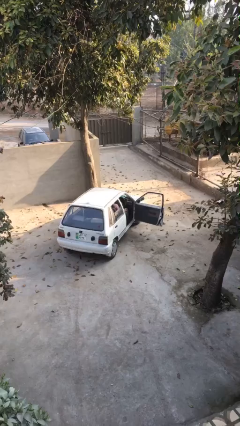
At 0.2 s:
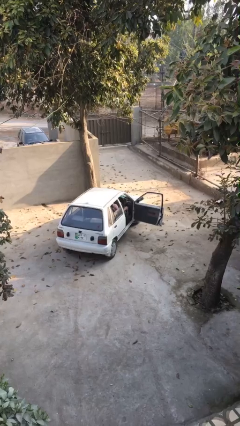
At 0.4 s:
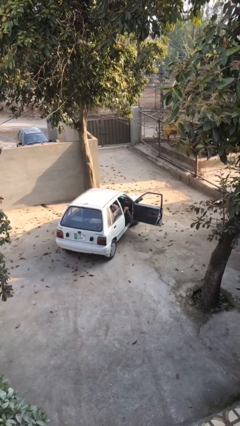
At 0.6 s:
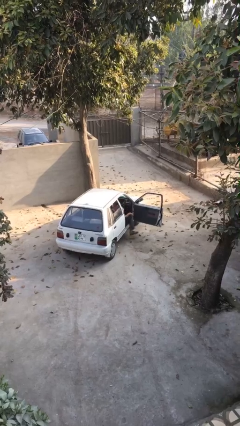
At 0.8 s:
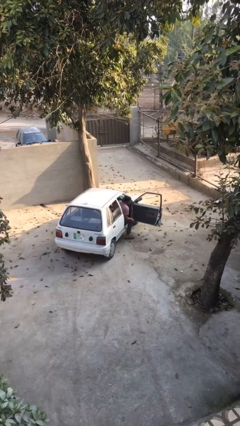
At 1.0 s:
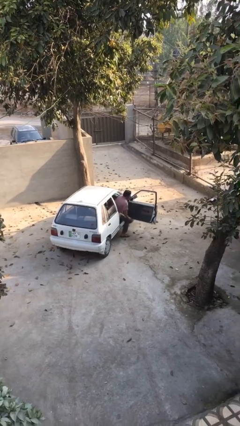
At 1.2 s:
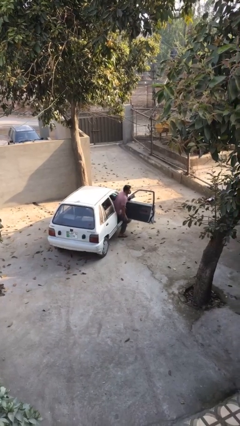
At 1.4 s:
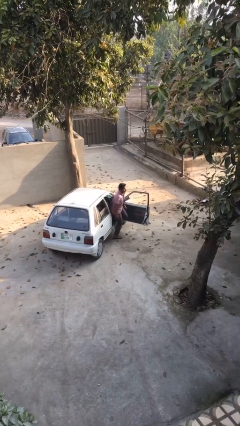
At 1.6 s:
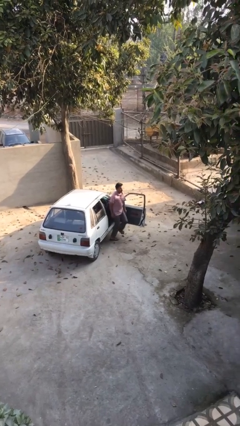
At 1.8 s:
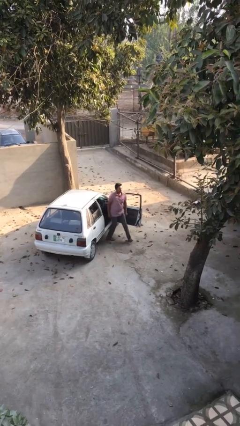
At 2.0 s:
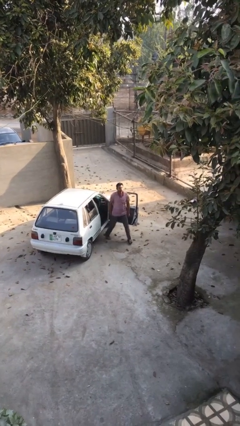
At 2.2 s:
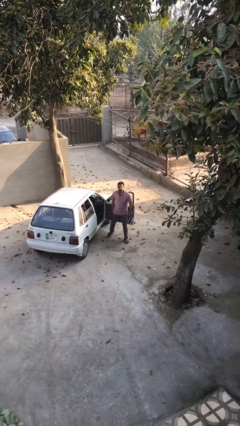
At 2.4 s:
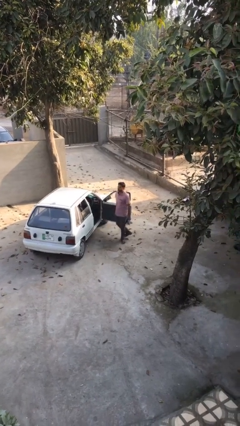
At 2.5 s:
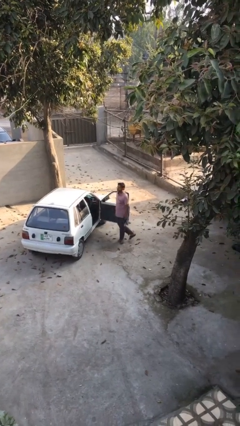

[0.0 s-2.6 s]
person exits car

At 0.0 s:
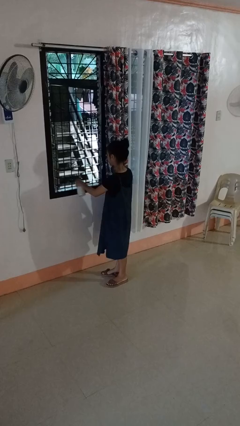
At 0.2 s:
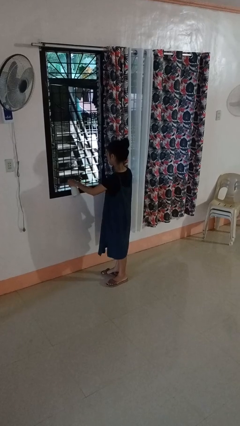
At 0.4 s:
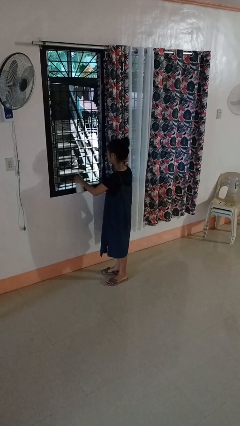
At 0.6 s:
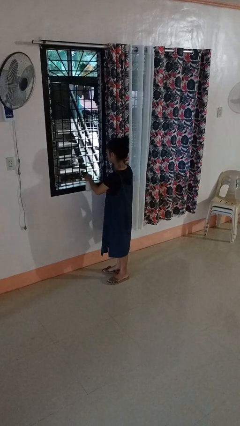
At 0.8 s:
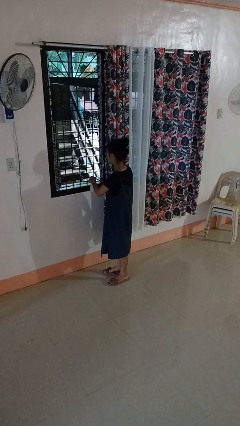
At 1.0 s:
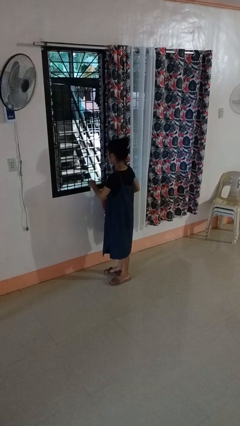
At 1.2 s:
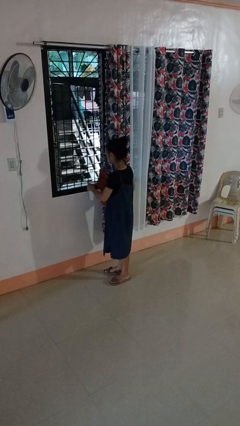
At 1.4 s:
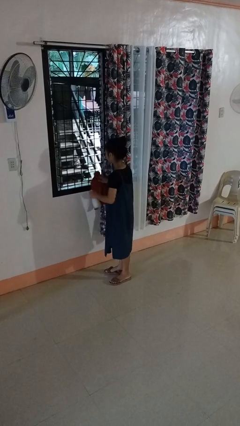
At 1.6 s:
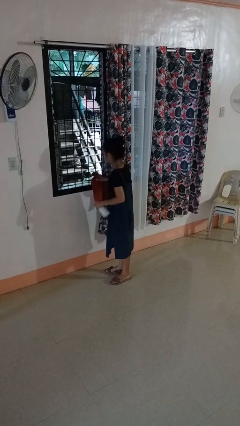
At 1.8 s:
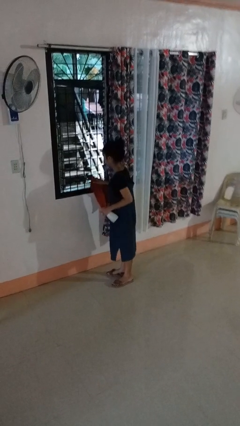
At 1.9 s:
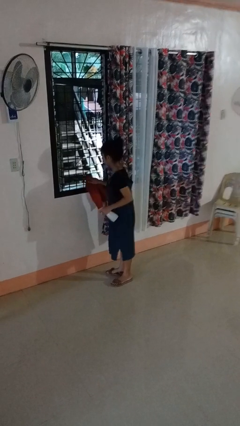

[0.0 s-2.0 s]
person sprays from bottle

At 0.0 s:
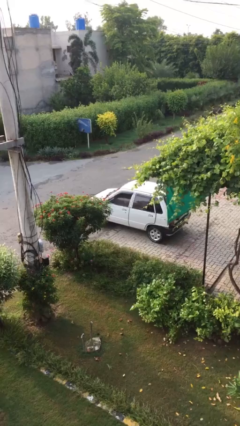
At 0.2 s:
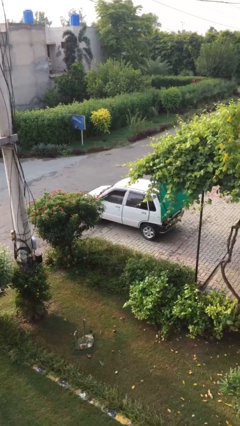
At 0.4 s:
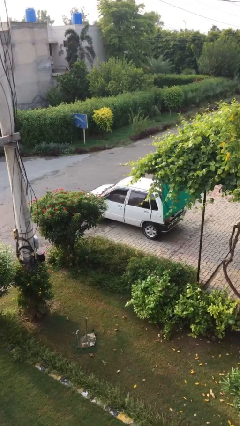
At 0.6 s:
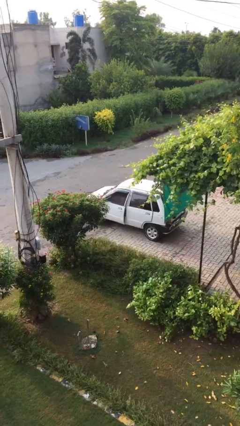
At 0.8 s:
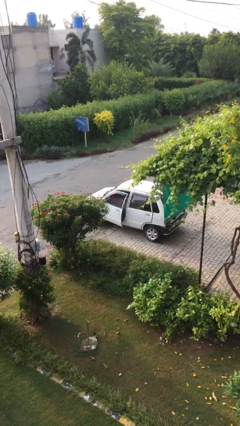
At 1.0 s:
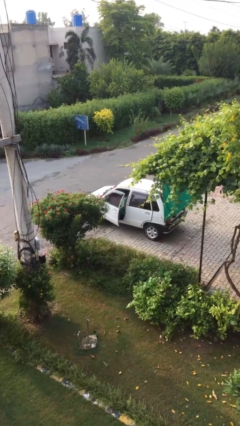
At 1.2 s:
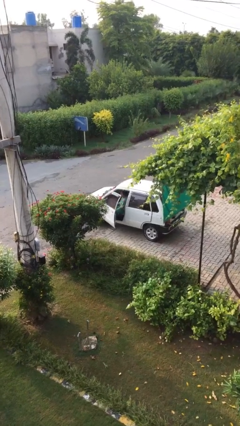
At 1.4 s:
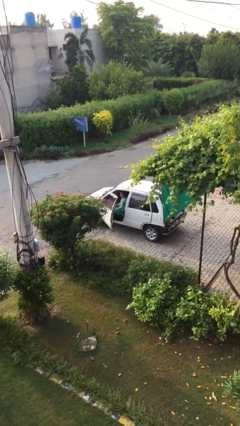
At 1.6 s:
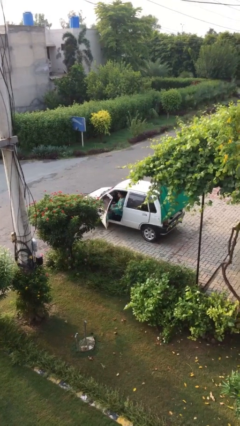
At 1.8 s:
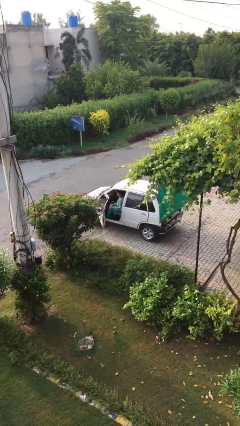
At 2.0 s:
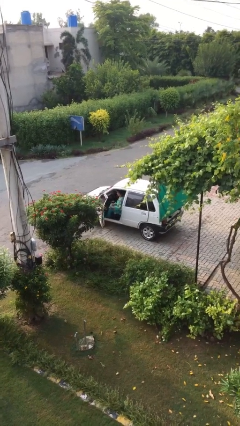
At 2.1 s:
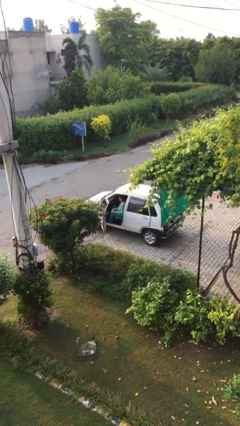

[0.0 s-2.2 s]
person opens car door

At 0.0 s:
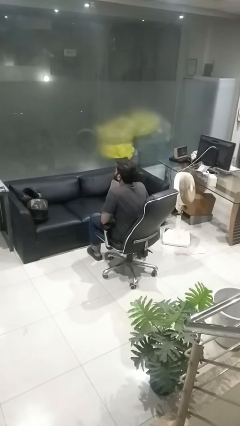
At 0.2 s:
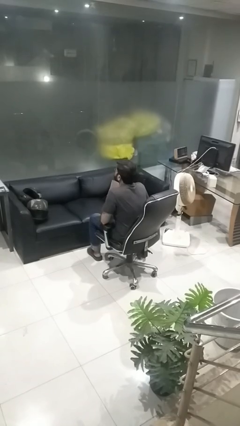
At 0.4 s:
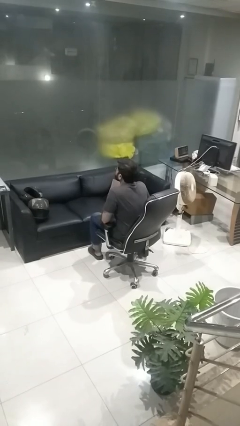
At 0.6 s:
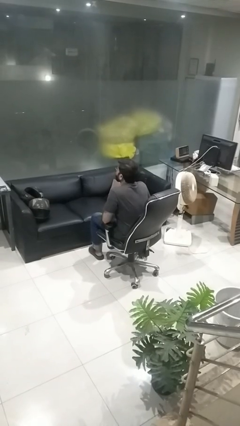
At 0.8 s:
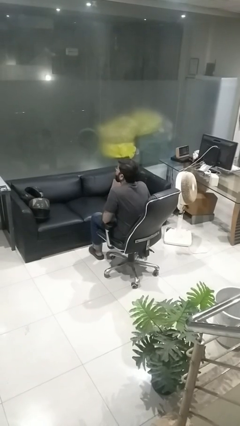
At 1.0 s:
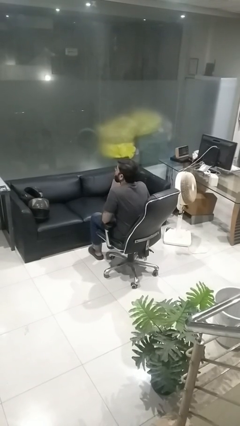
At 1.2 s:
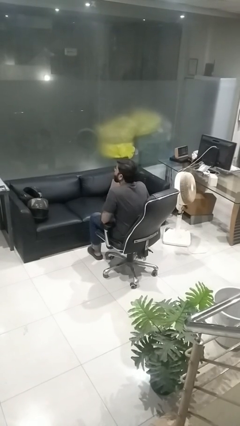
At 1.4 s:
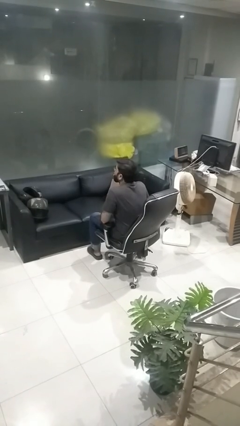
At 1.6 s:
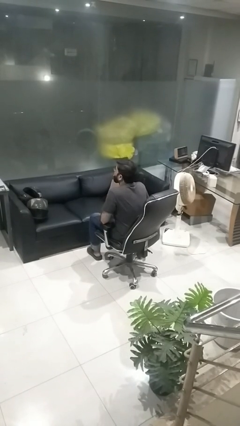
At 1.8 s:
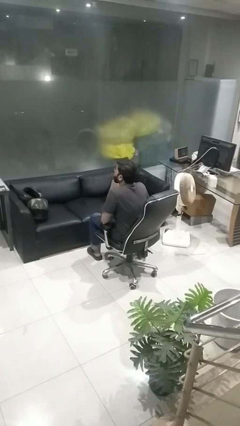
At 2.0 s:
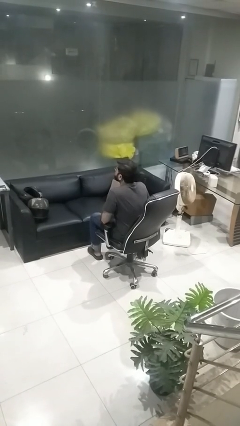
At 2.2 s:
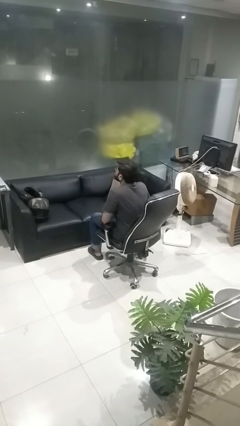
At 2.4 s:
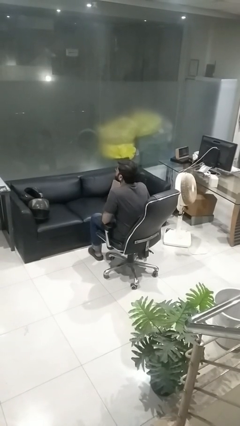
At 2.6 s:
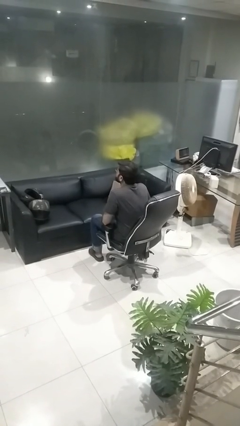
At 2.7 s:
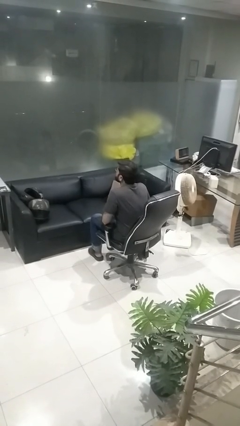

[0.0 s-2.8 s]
person sticks out tongue

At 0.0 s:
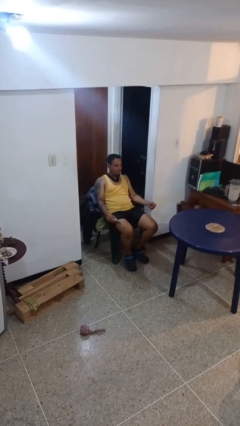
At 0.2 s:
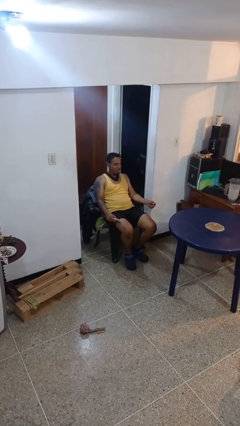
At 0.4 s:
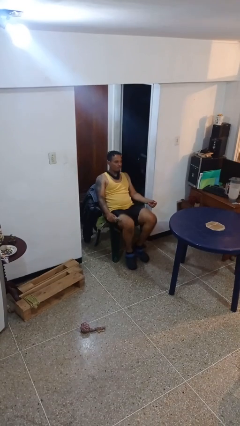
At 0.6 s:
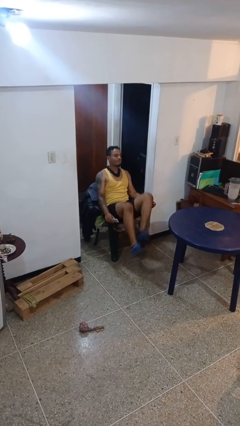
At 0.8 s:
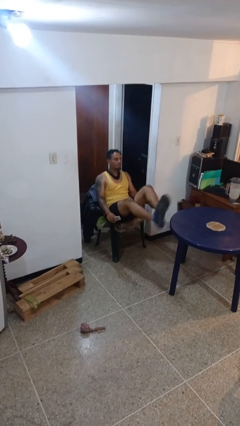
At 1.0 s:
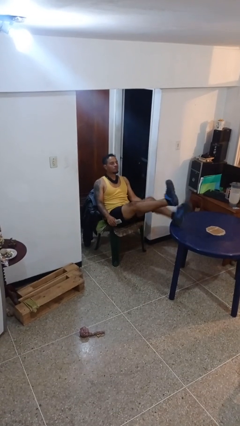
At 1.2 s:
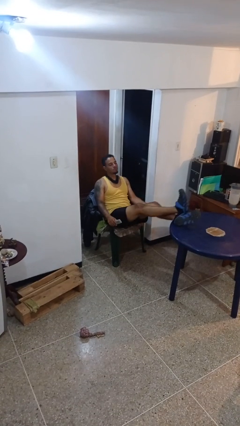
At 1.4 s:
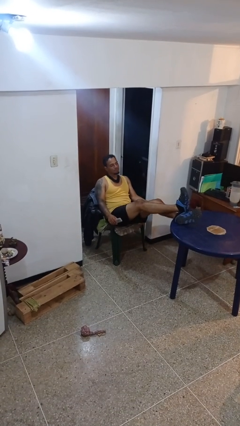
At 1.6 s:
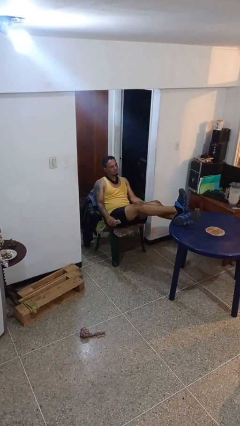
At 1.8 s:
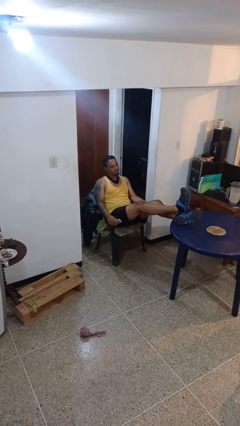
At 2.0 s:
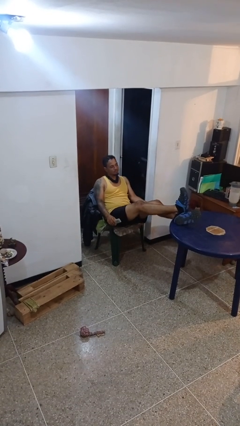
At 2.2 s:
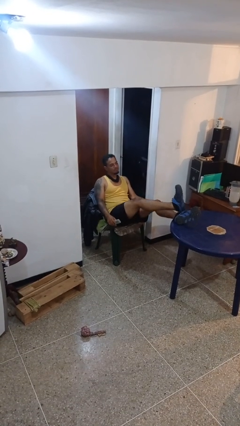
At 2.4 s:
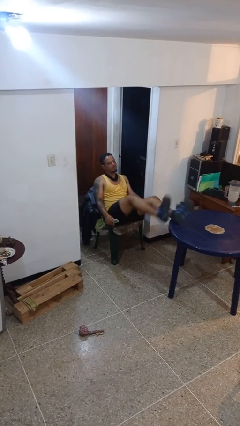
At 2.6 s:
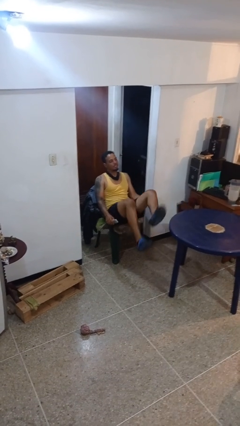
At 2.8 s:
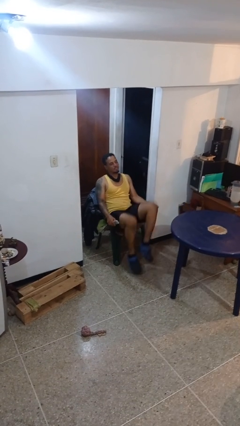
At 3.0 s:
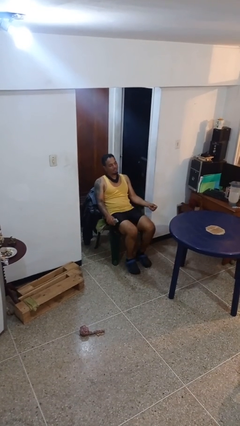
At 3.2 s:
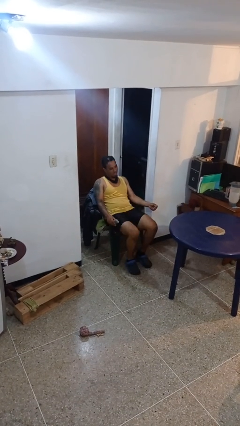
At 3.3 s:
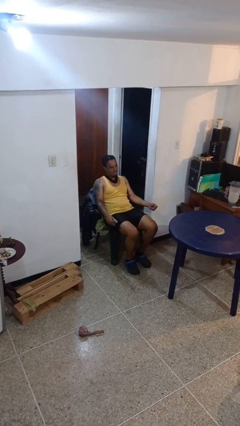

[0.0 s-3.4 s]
person puts feet up

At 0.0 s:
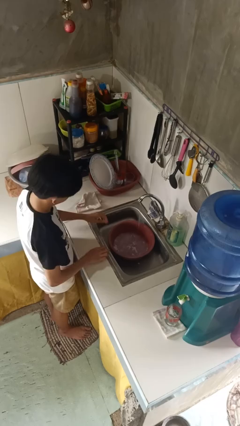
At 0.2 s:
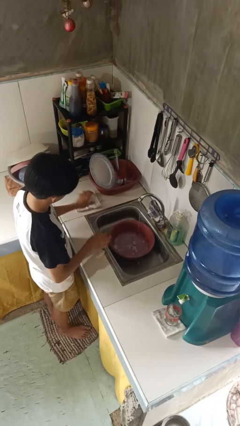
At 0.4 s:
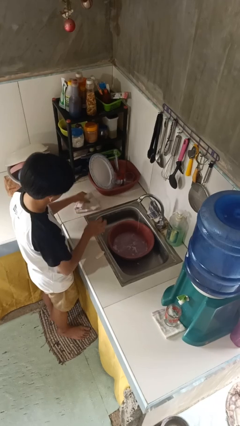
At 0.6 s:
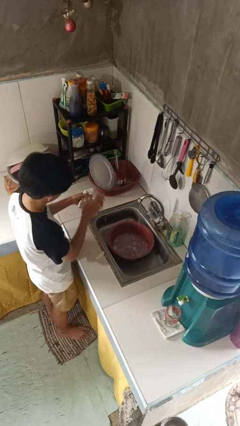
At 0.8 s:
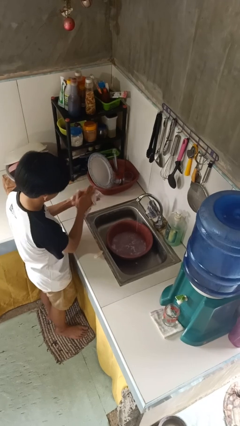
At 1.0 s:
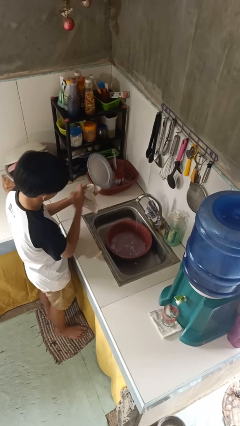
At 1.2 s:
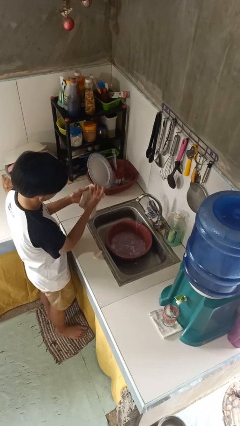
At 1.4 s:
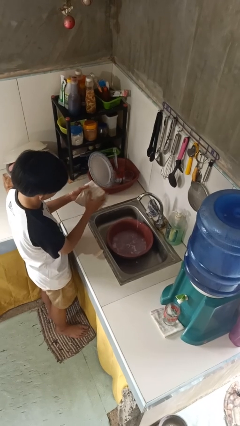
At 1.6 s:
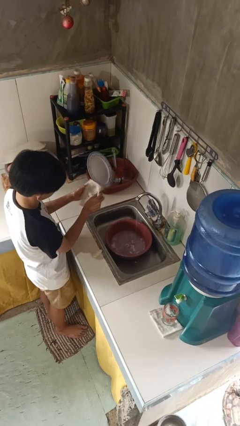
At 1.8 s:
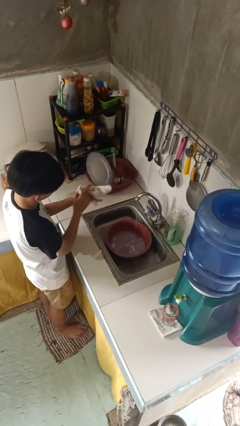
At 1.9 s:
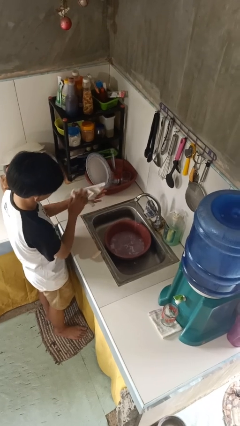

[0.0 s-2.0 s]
person dries hands with towel

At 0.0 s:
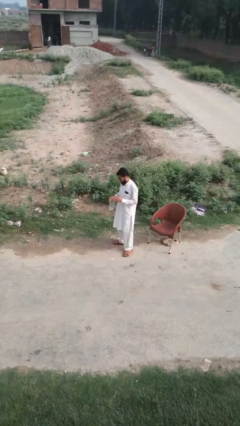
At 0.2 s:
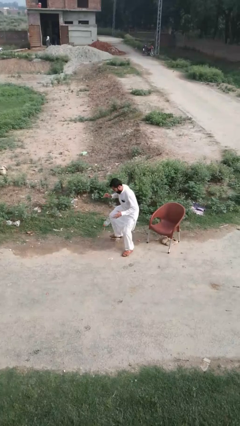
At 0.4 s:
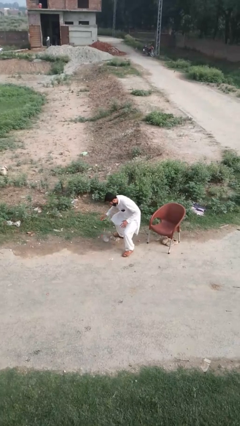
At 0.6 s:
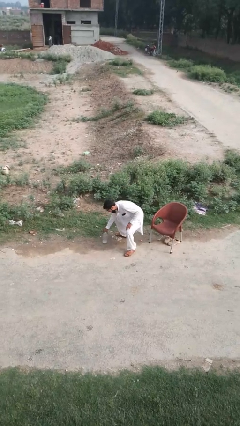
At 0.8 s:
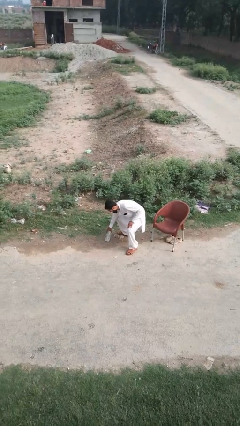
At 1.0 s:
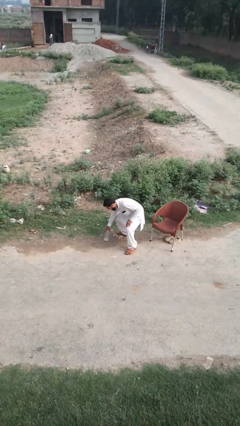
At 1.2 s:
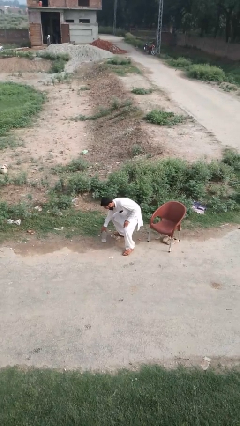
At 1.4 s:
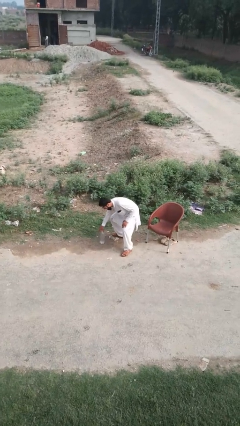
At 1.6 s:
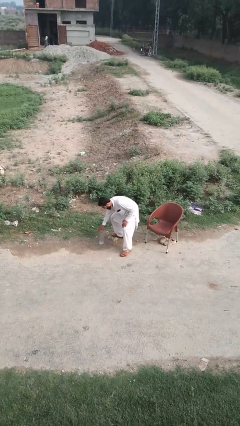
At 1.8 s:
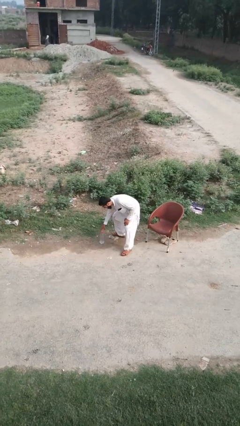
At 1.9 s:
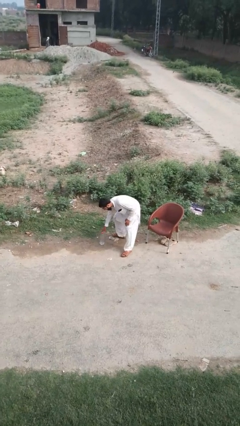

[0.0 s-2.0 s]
person drops object
